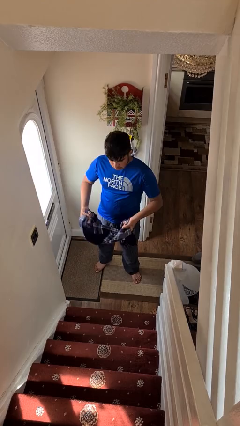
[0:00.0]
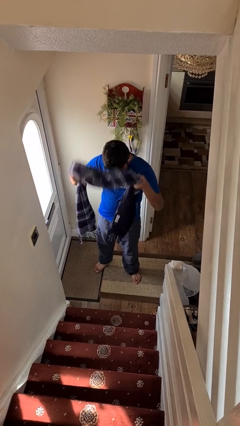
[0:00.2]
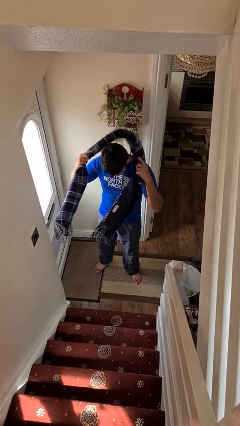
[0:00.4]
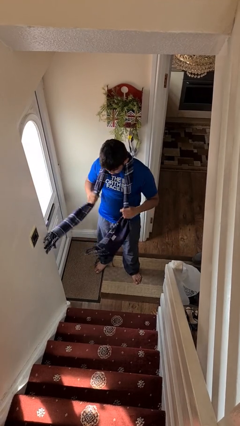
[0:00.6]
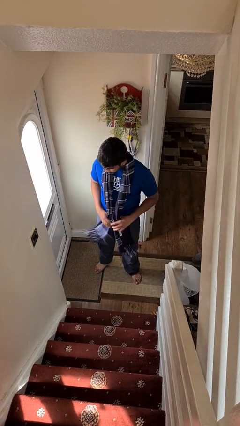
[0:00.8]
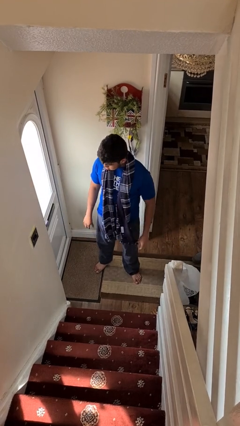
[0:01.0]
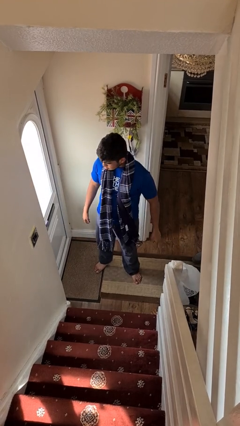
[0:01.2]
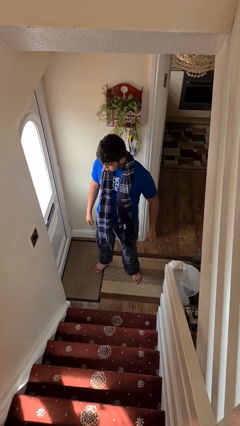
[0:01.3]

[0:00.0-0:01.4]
person puts on scarf

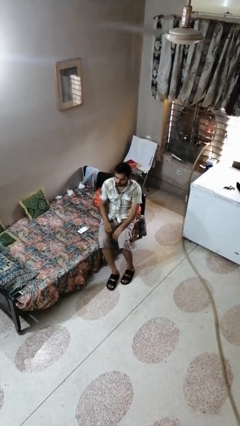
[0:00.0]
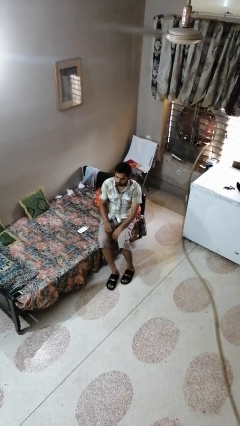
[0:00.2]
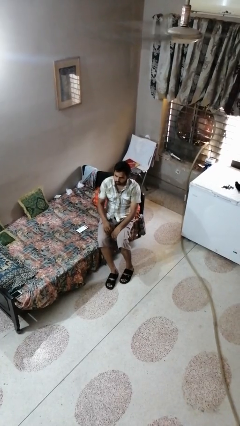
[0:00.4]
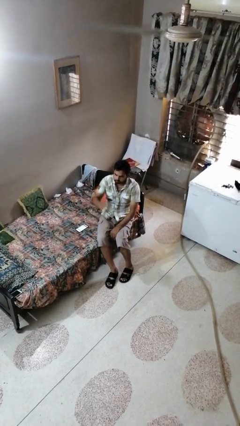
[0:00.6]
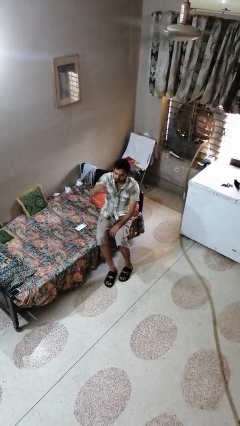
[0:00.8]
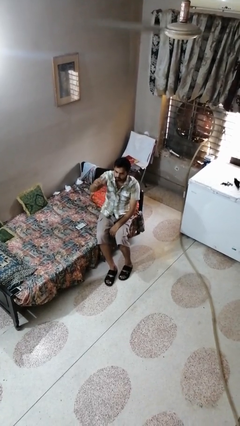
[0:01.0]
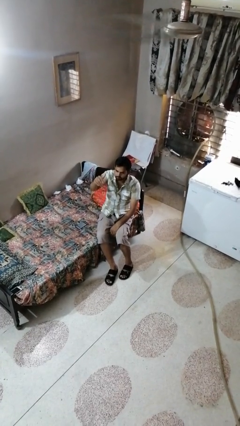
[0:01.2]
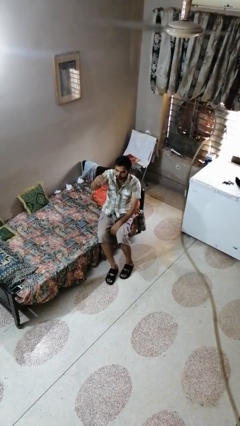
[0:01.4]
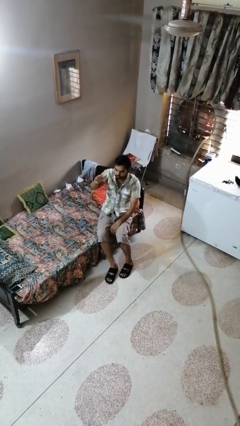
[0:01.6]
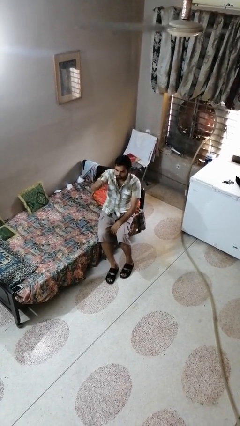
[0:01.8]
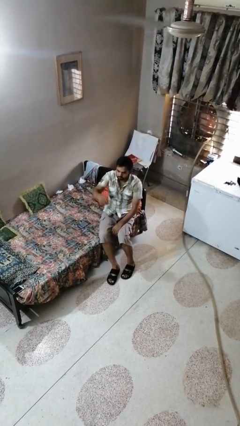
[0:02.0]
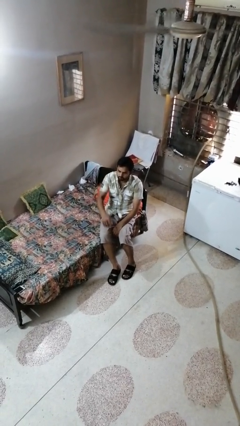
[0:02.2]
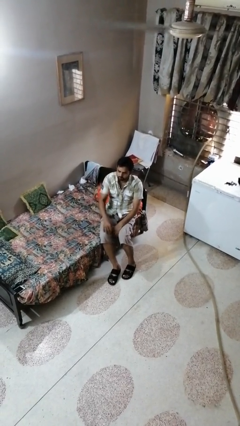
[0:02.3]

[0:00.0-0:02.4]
person gestures come here

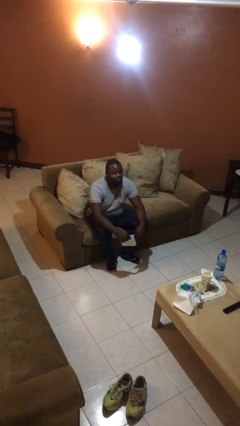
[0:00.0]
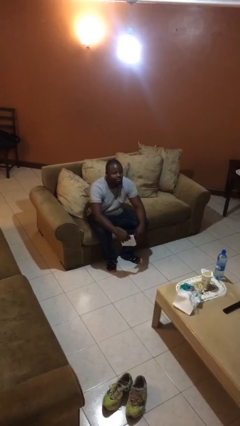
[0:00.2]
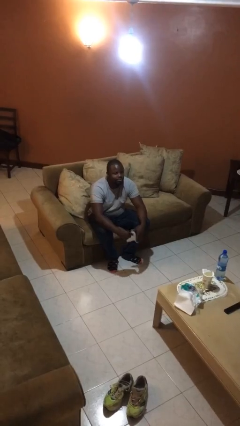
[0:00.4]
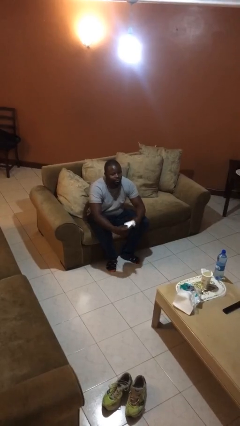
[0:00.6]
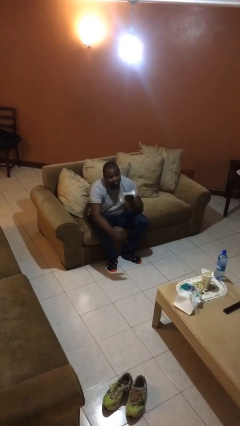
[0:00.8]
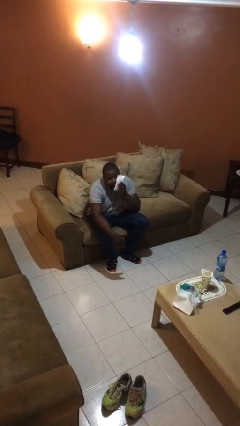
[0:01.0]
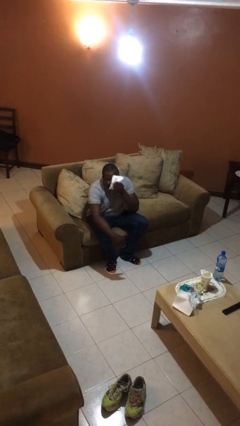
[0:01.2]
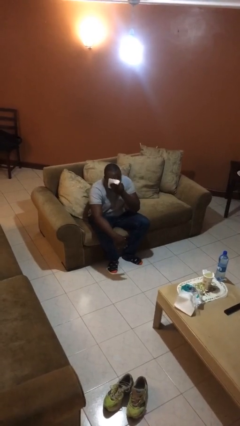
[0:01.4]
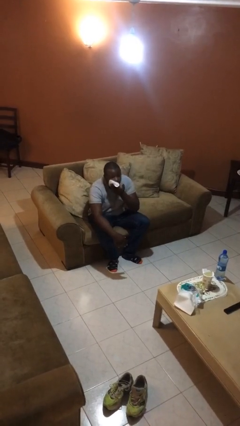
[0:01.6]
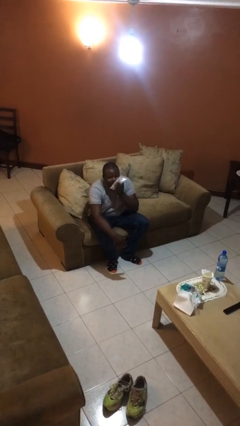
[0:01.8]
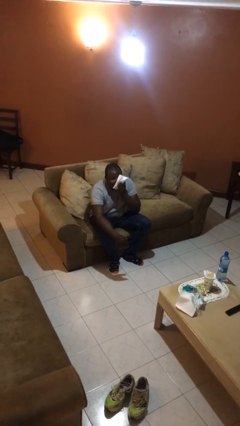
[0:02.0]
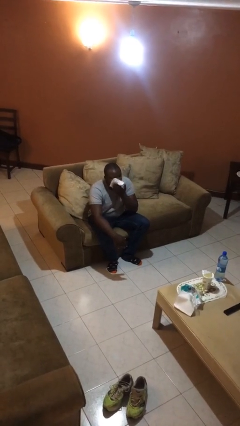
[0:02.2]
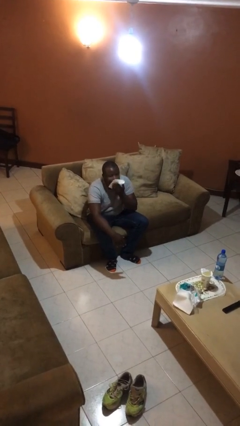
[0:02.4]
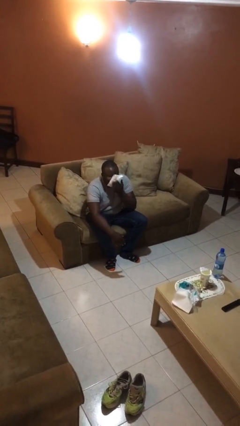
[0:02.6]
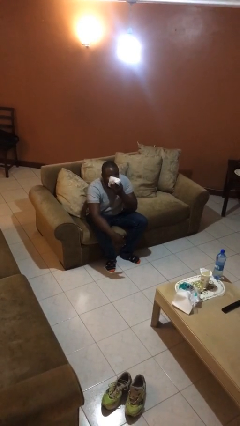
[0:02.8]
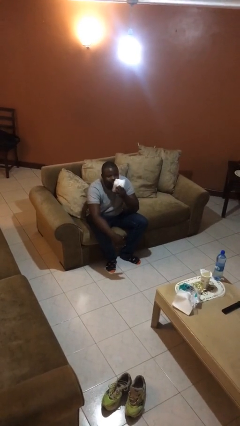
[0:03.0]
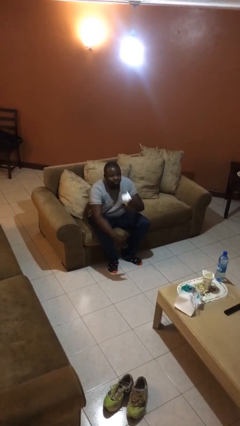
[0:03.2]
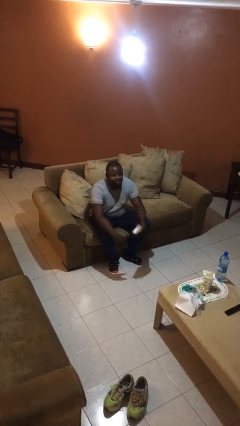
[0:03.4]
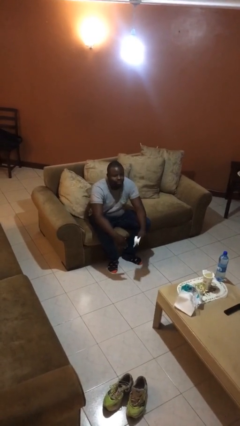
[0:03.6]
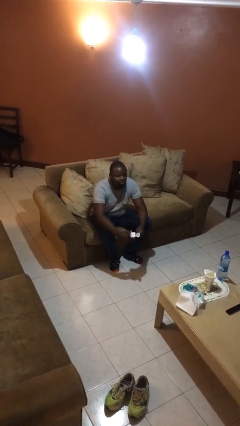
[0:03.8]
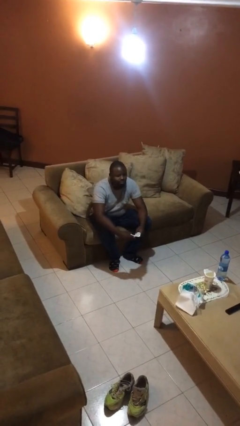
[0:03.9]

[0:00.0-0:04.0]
person wipes mouth with napkin

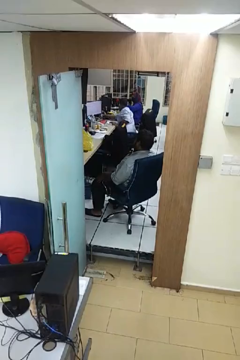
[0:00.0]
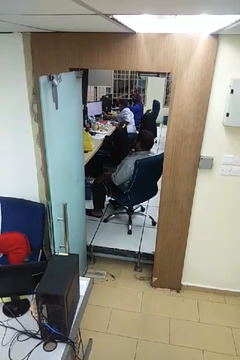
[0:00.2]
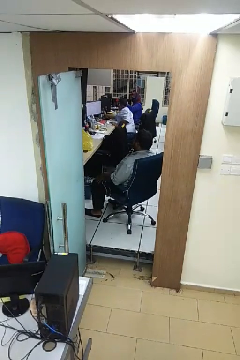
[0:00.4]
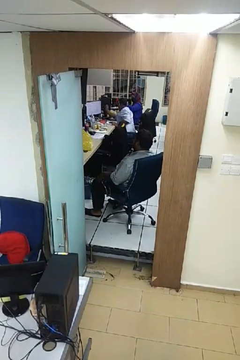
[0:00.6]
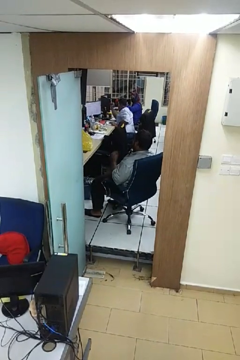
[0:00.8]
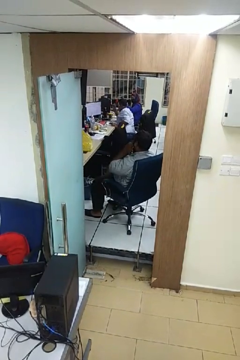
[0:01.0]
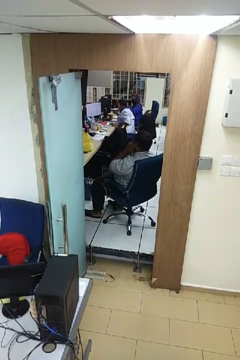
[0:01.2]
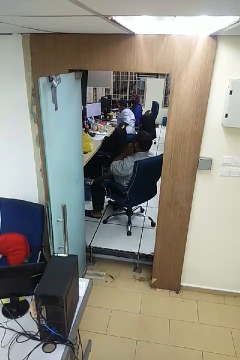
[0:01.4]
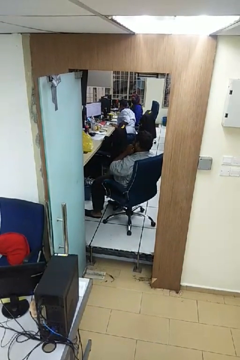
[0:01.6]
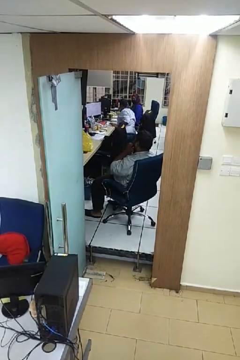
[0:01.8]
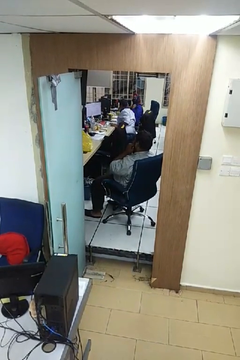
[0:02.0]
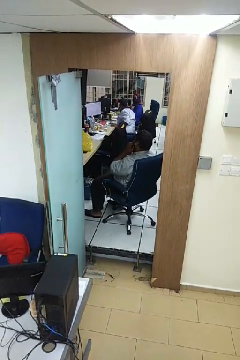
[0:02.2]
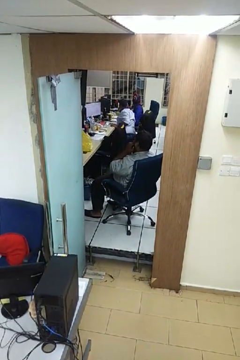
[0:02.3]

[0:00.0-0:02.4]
person scratches face

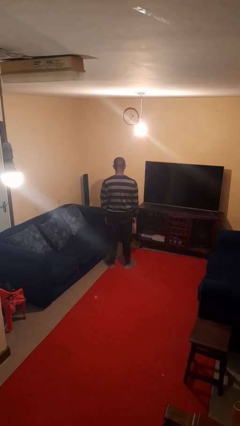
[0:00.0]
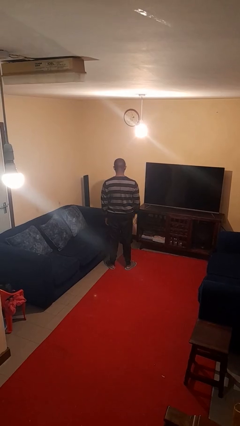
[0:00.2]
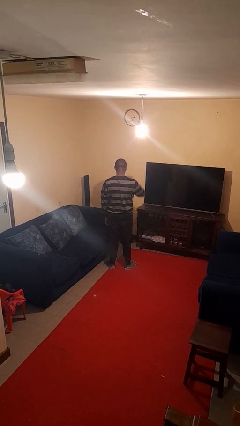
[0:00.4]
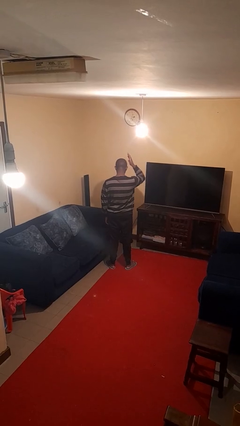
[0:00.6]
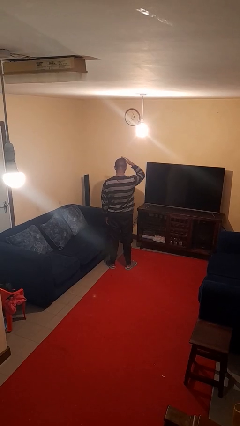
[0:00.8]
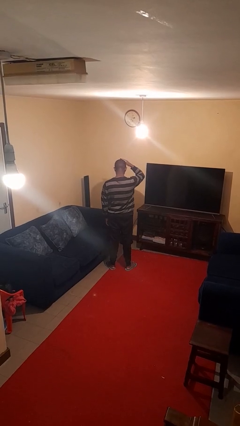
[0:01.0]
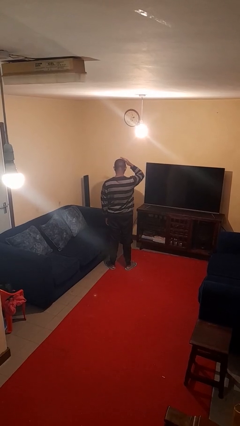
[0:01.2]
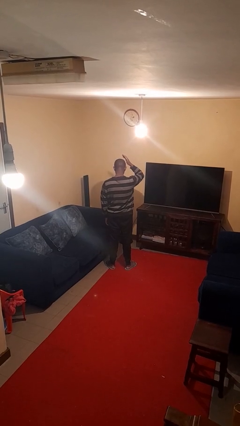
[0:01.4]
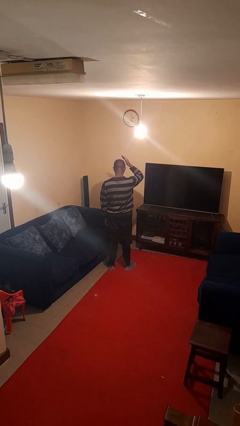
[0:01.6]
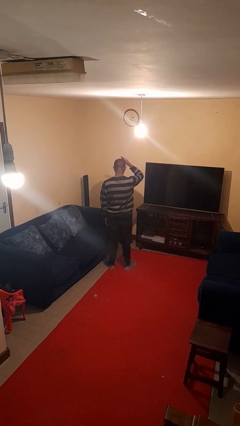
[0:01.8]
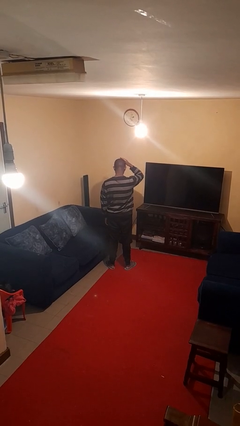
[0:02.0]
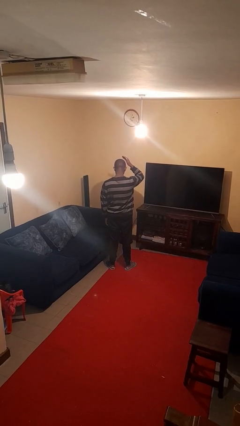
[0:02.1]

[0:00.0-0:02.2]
person pats head

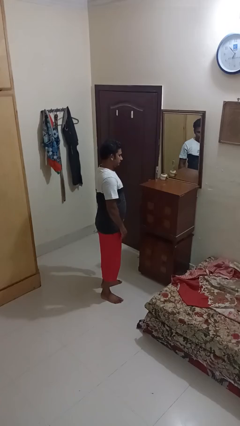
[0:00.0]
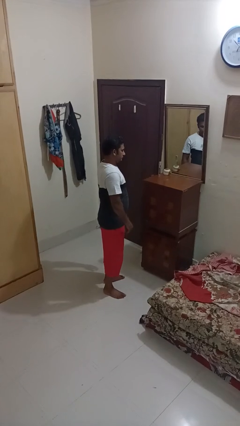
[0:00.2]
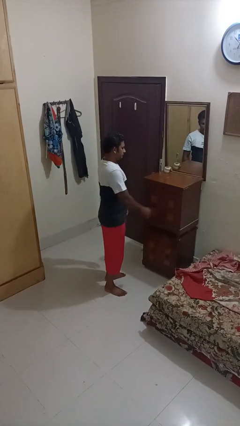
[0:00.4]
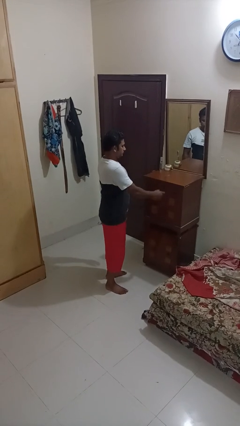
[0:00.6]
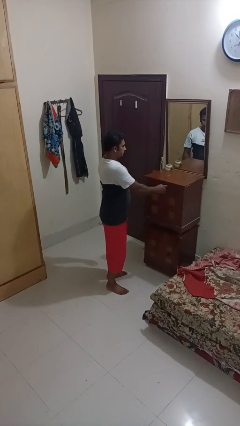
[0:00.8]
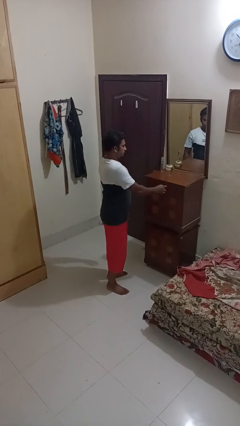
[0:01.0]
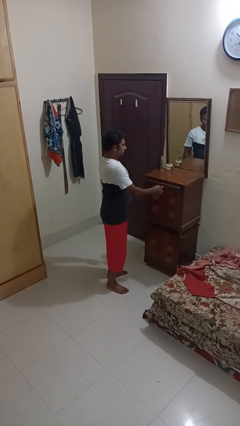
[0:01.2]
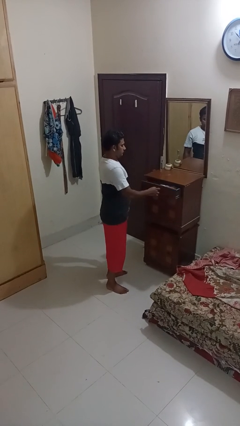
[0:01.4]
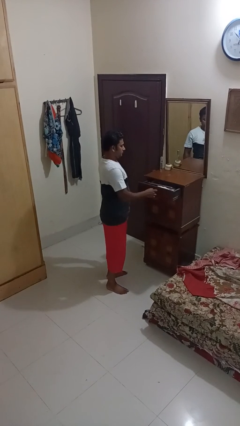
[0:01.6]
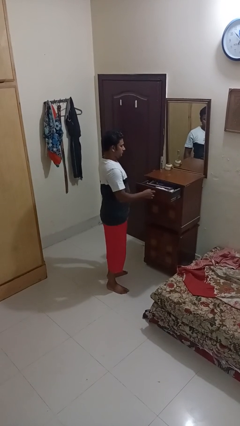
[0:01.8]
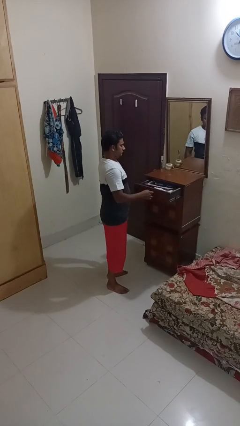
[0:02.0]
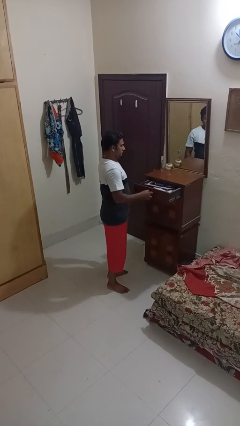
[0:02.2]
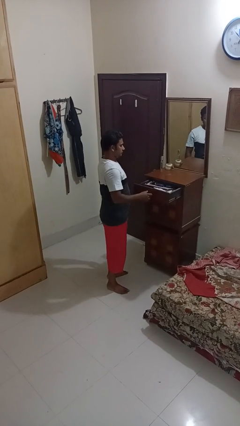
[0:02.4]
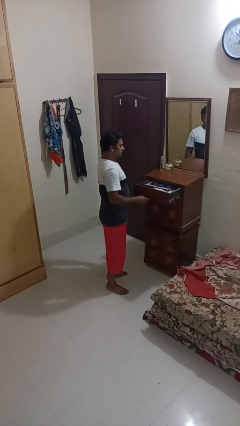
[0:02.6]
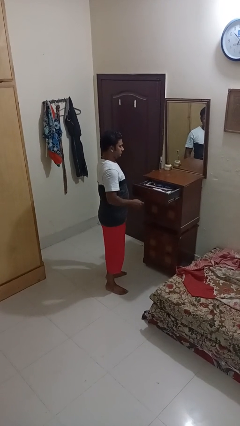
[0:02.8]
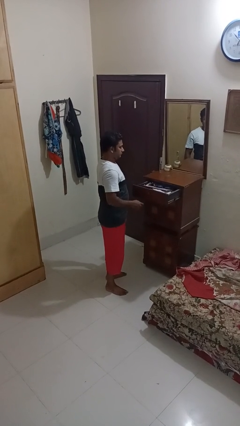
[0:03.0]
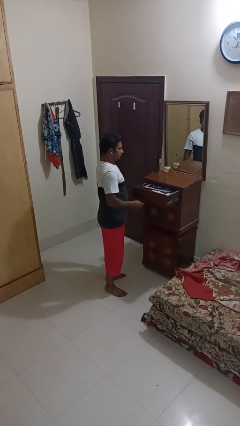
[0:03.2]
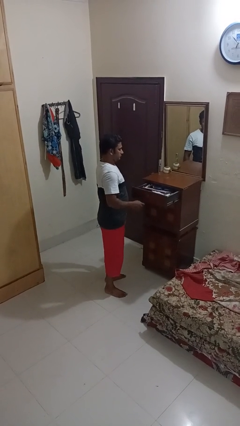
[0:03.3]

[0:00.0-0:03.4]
person opens dresser drawer

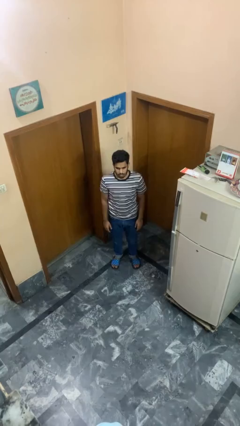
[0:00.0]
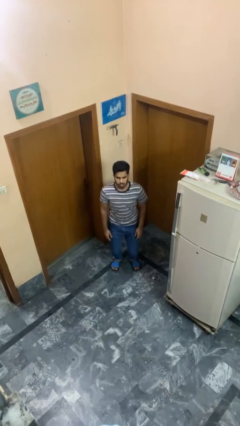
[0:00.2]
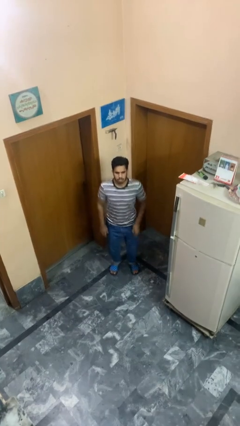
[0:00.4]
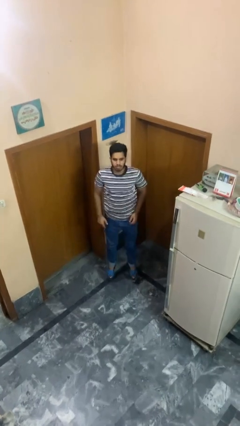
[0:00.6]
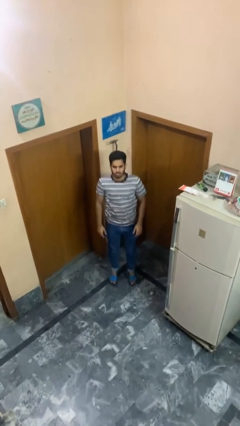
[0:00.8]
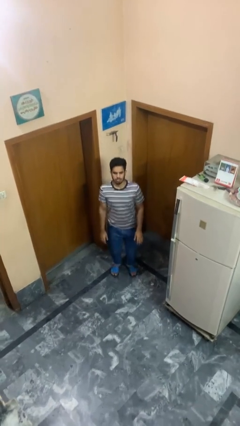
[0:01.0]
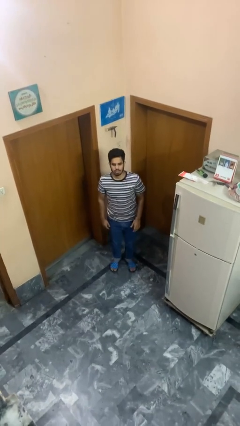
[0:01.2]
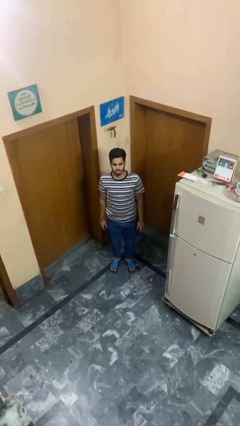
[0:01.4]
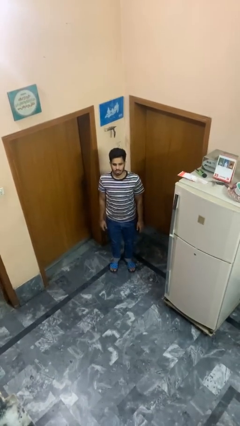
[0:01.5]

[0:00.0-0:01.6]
person jumps
